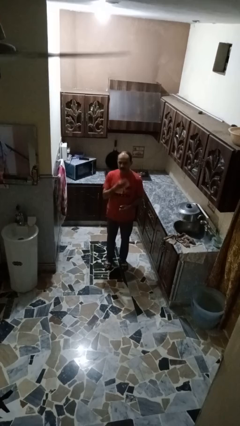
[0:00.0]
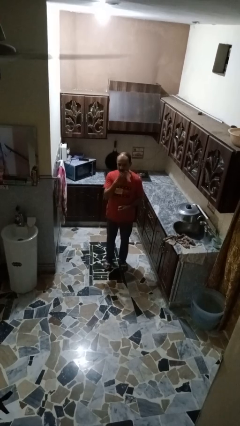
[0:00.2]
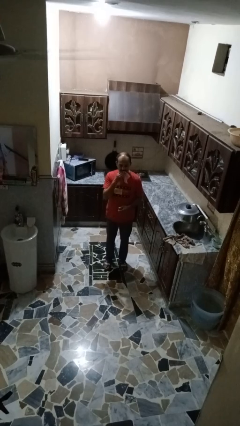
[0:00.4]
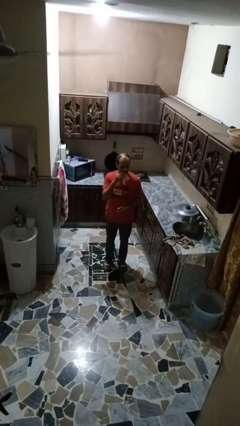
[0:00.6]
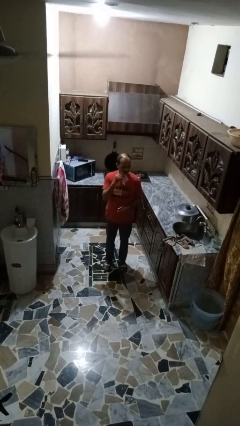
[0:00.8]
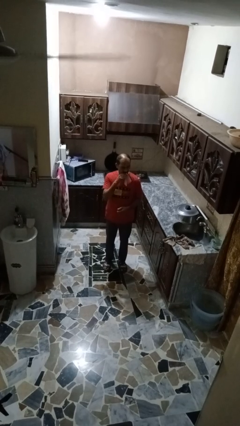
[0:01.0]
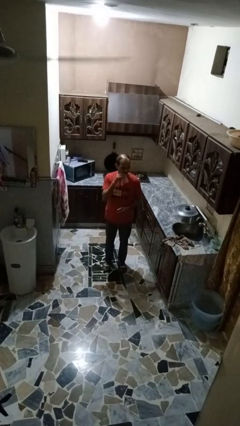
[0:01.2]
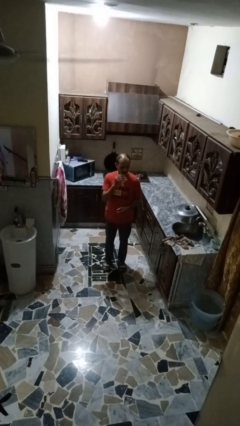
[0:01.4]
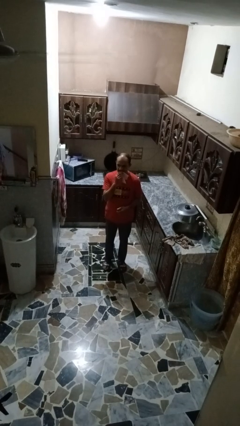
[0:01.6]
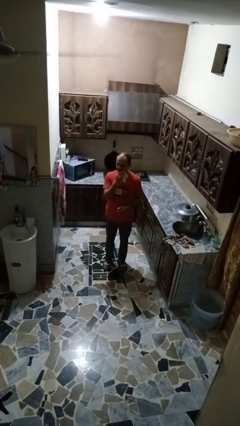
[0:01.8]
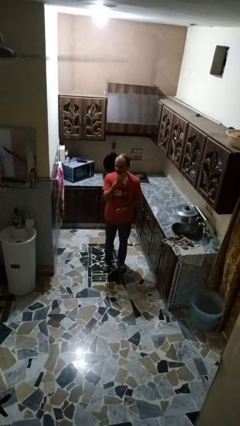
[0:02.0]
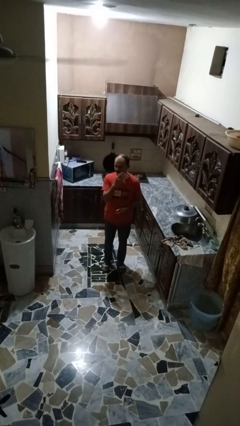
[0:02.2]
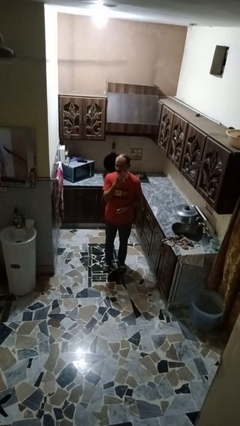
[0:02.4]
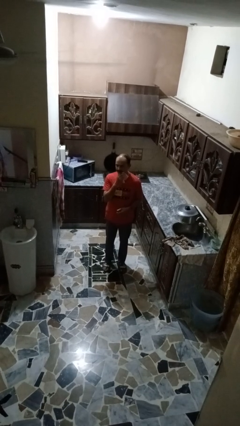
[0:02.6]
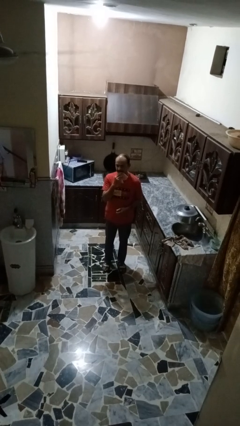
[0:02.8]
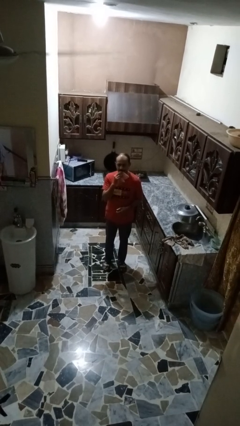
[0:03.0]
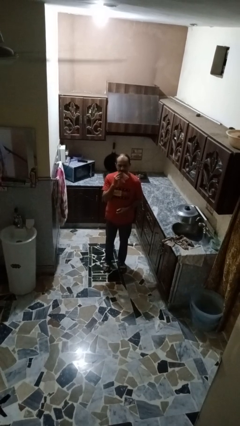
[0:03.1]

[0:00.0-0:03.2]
person wipes mouth with napkin

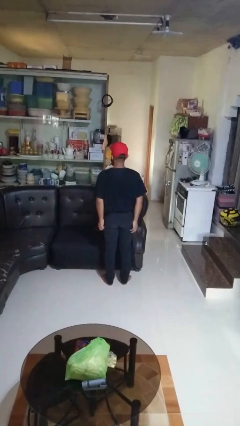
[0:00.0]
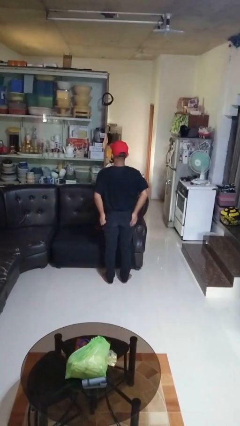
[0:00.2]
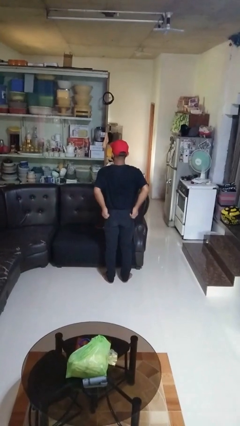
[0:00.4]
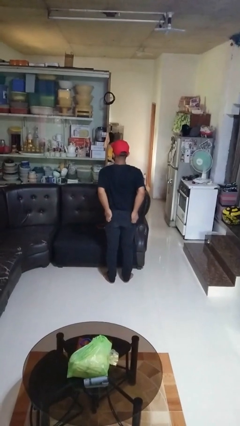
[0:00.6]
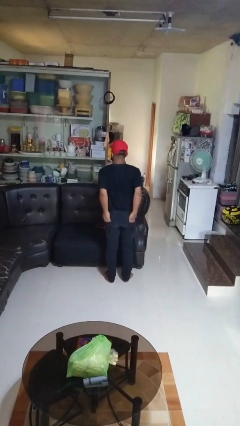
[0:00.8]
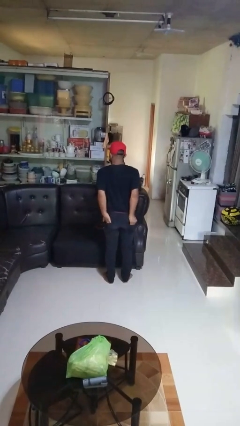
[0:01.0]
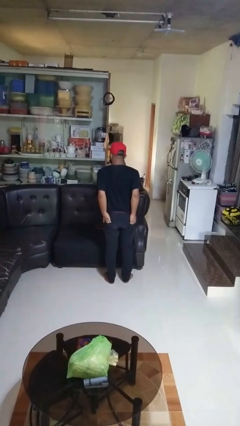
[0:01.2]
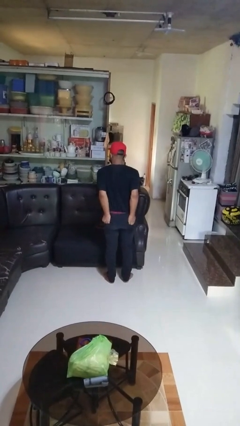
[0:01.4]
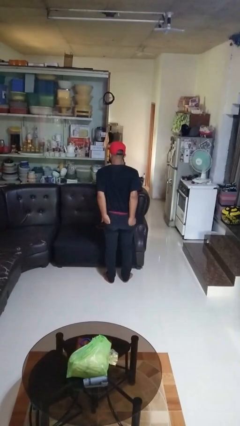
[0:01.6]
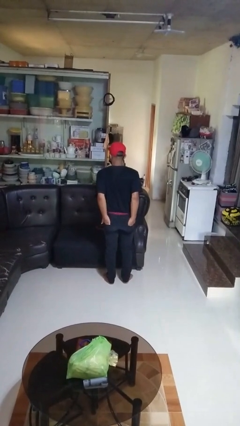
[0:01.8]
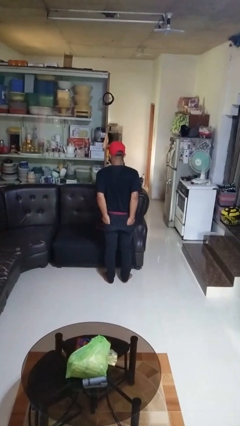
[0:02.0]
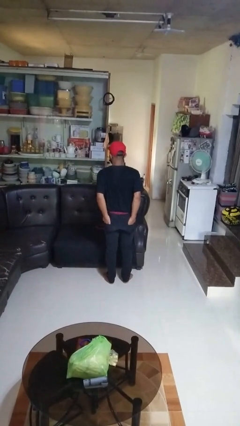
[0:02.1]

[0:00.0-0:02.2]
person puts hands in back pockets

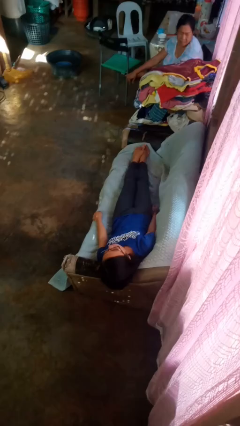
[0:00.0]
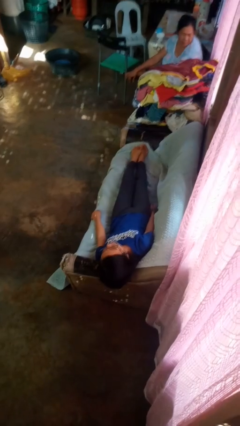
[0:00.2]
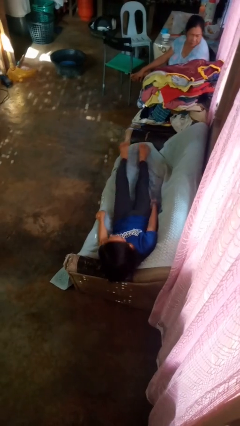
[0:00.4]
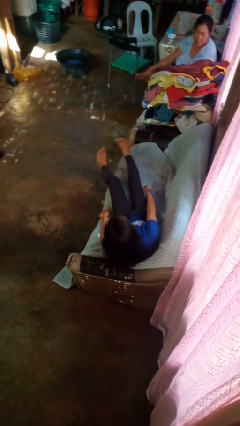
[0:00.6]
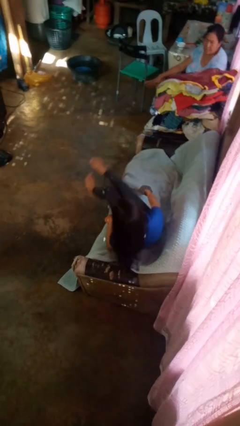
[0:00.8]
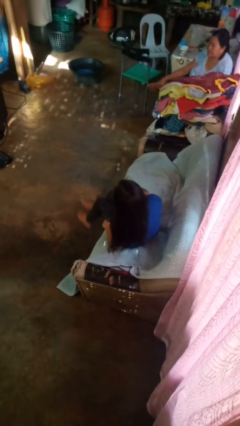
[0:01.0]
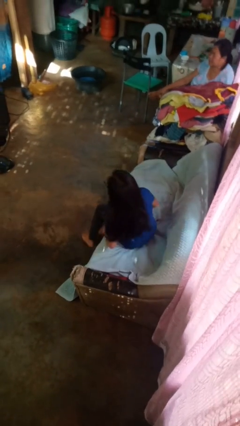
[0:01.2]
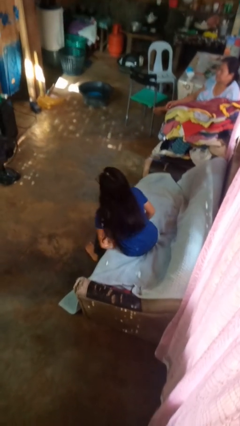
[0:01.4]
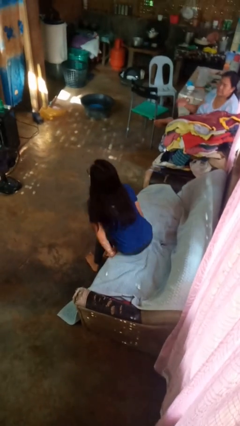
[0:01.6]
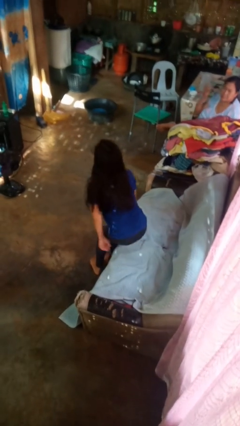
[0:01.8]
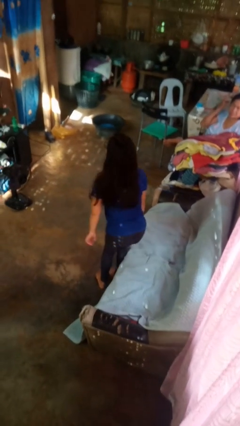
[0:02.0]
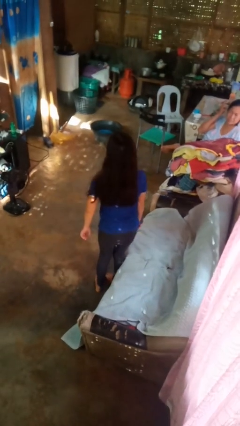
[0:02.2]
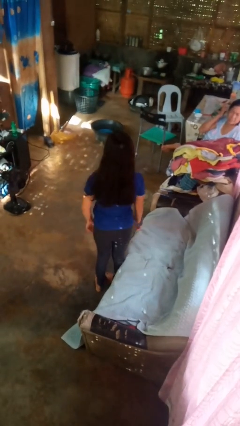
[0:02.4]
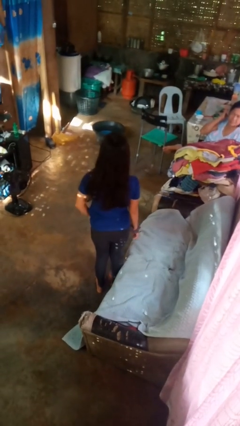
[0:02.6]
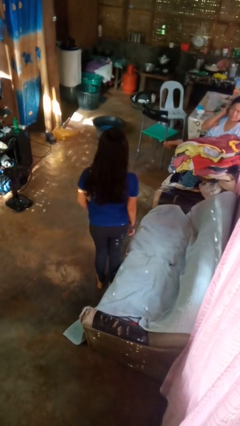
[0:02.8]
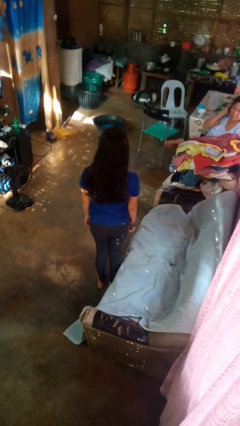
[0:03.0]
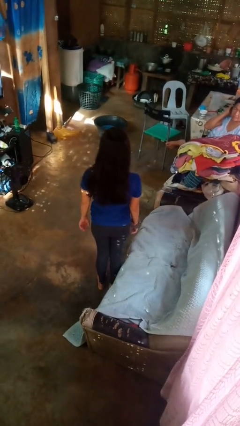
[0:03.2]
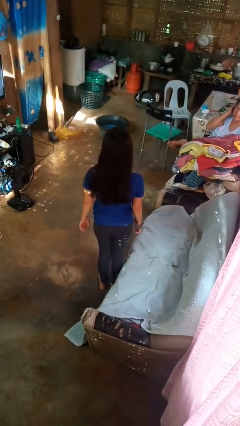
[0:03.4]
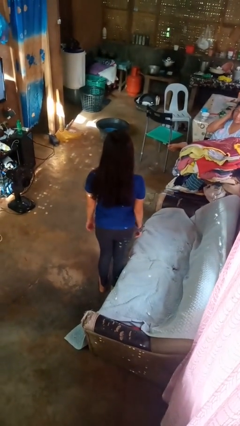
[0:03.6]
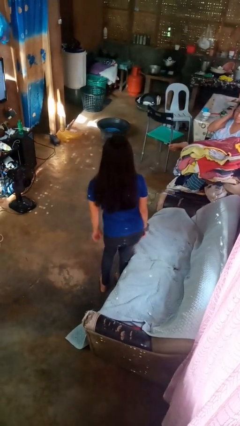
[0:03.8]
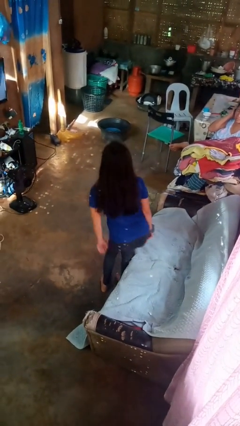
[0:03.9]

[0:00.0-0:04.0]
person stands up

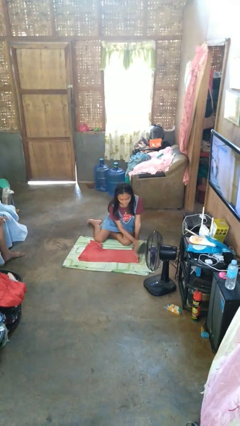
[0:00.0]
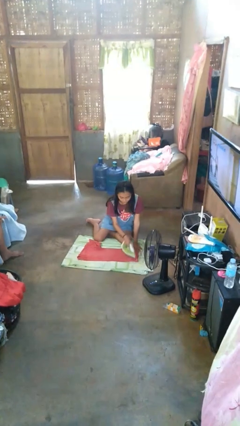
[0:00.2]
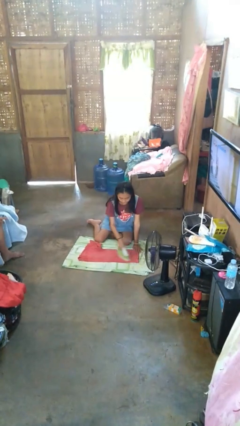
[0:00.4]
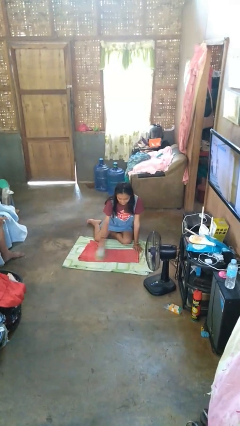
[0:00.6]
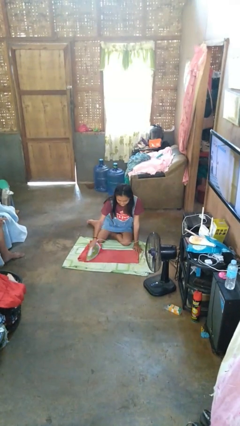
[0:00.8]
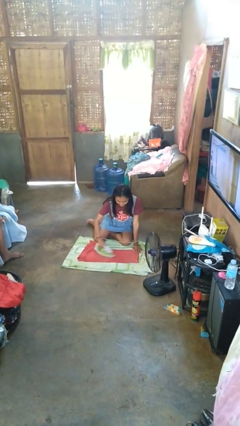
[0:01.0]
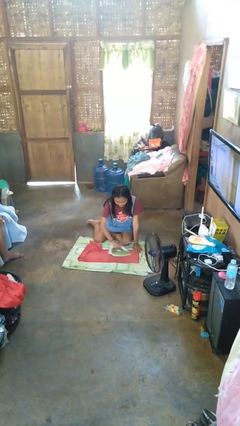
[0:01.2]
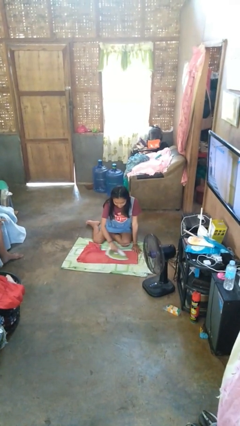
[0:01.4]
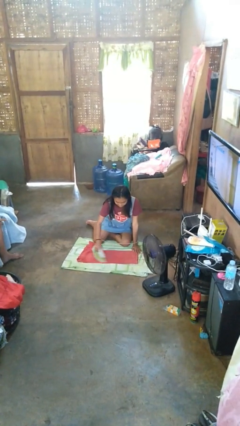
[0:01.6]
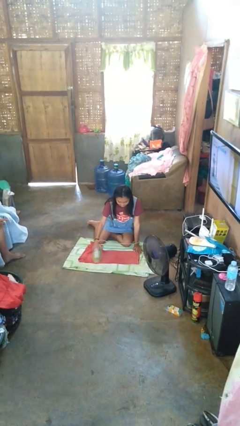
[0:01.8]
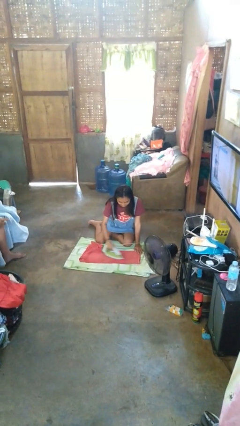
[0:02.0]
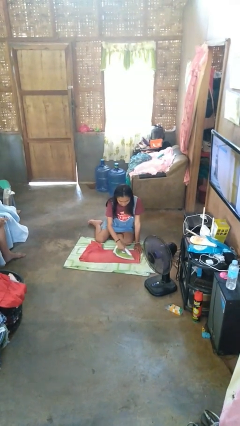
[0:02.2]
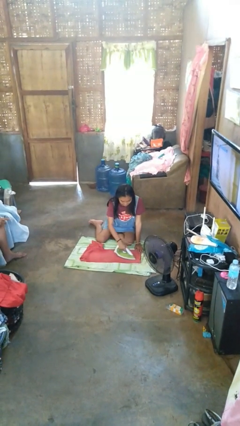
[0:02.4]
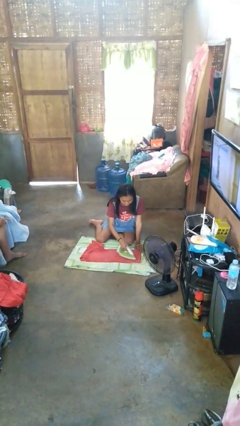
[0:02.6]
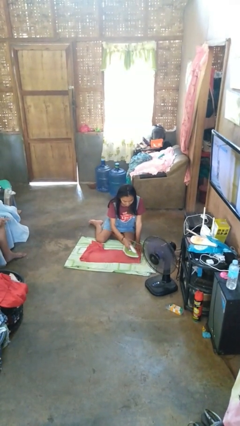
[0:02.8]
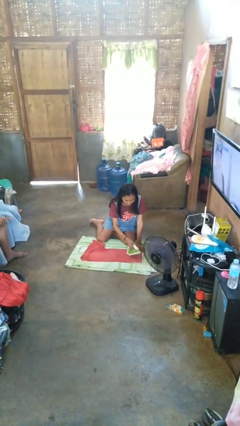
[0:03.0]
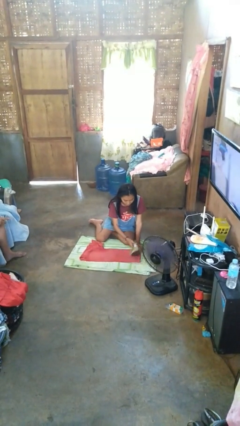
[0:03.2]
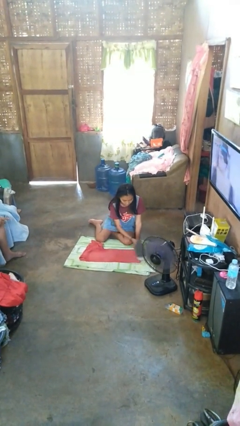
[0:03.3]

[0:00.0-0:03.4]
person irons clothes

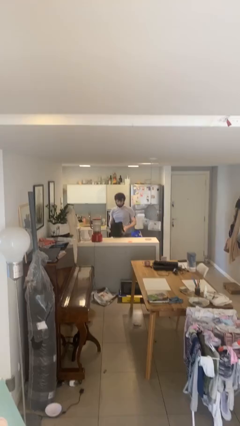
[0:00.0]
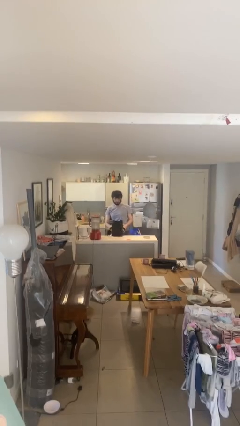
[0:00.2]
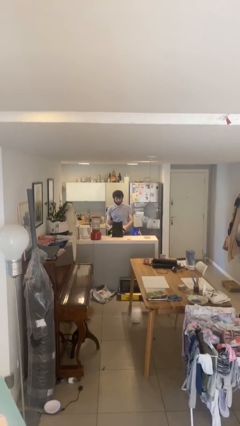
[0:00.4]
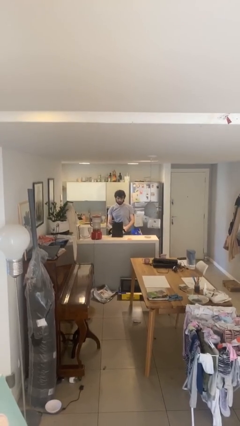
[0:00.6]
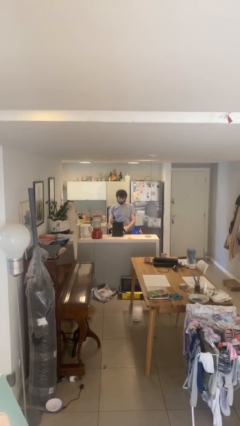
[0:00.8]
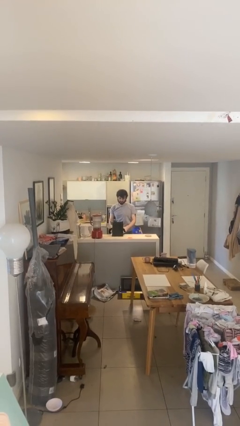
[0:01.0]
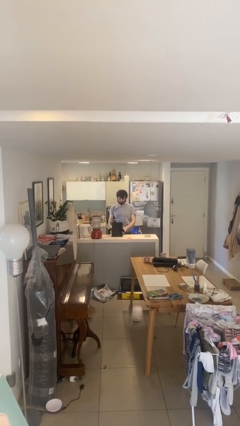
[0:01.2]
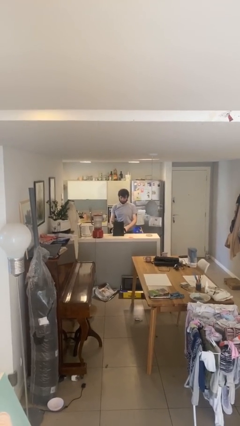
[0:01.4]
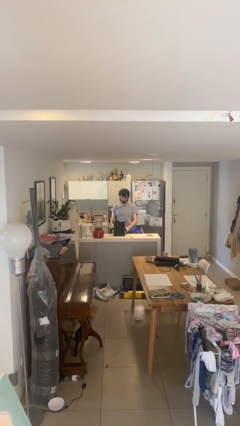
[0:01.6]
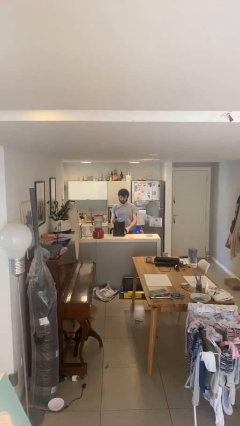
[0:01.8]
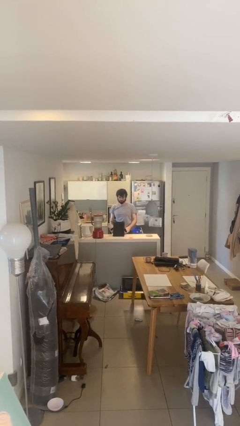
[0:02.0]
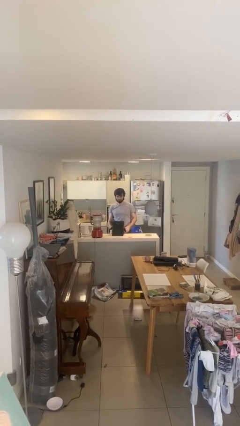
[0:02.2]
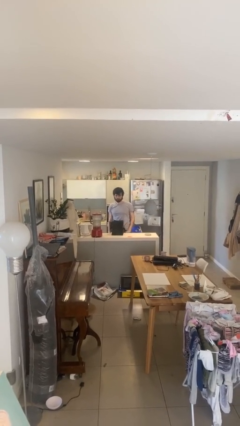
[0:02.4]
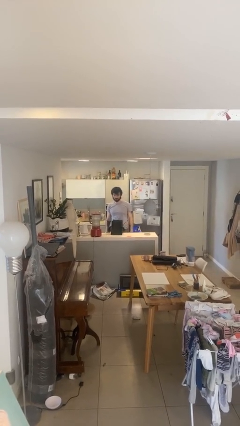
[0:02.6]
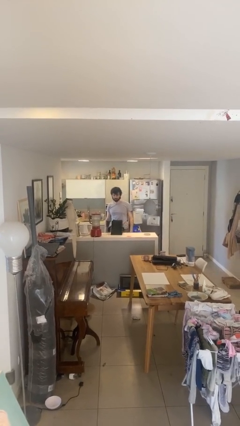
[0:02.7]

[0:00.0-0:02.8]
person puts down object on table

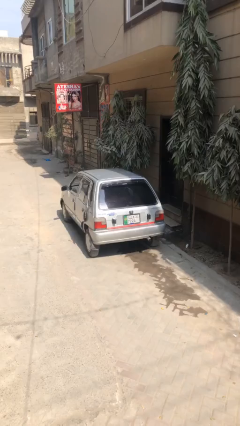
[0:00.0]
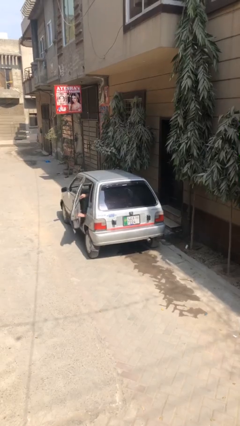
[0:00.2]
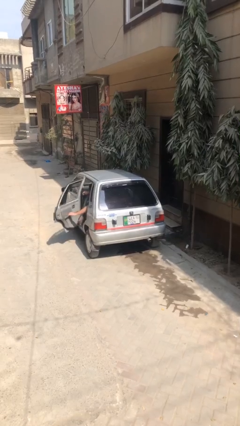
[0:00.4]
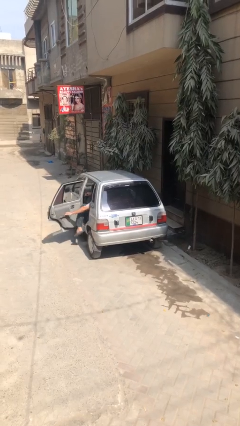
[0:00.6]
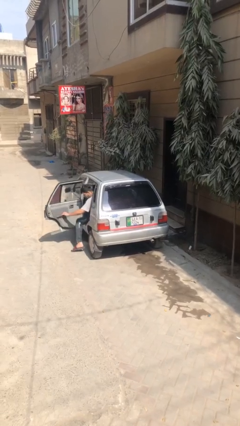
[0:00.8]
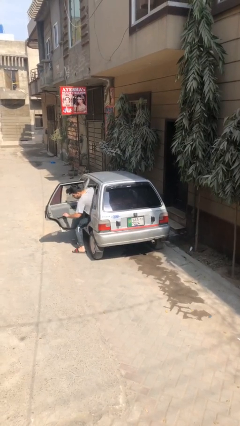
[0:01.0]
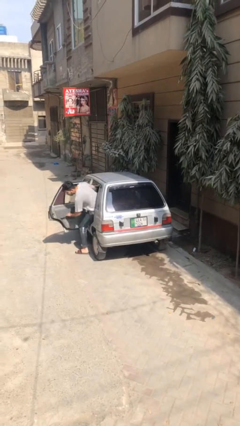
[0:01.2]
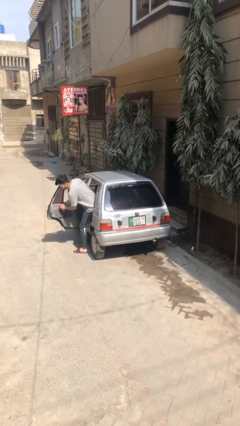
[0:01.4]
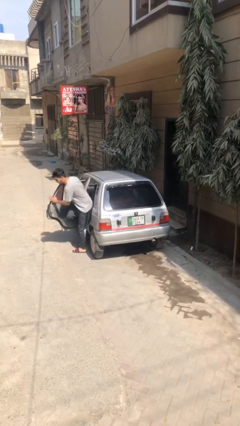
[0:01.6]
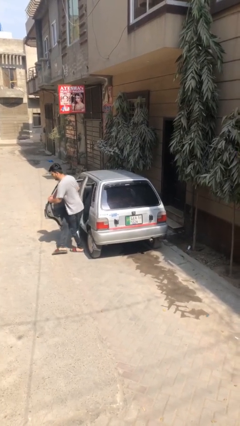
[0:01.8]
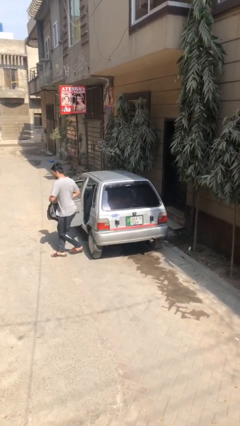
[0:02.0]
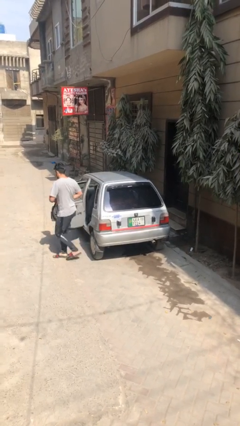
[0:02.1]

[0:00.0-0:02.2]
car drops off person
